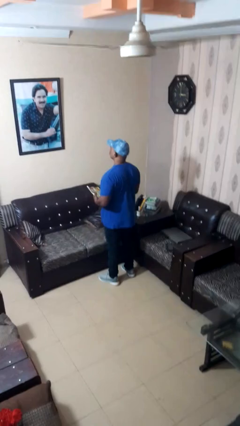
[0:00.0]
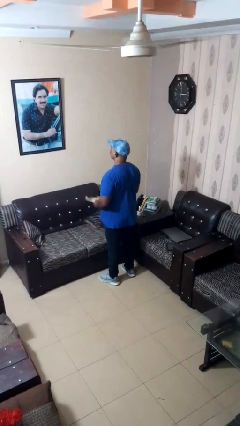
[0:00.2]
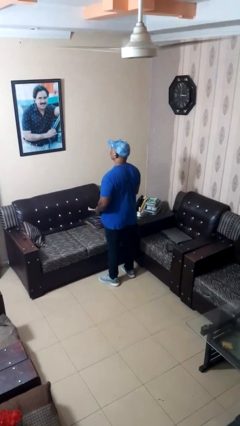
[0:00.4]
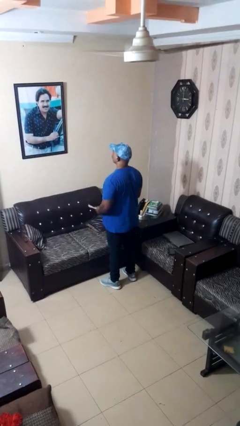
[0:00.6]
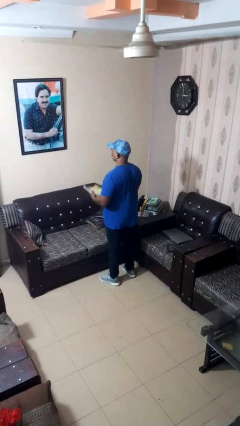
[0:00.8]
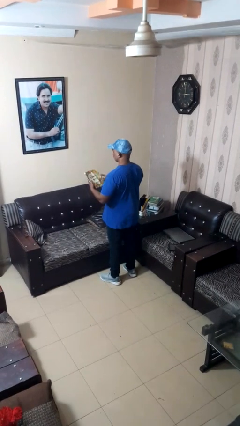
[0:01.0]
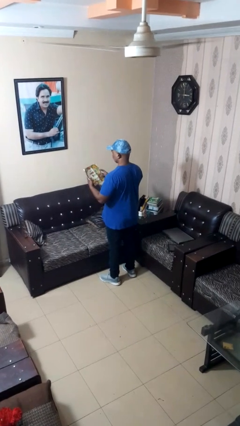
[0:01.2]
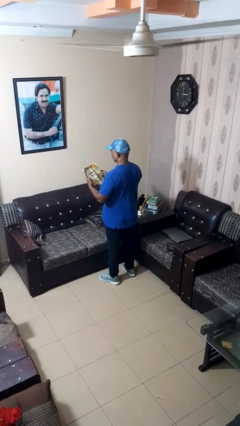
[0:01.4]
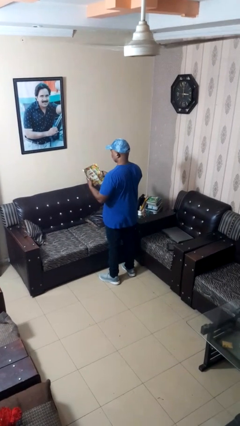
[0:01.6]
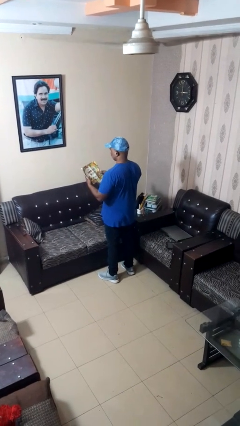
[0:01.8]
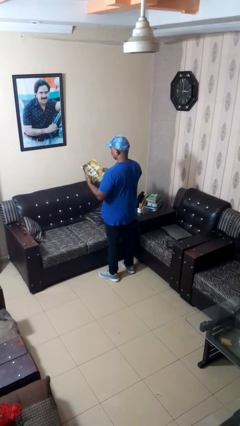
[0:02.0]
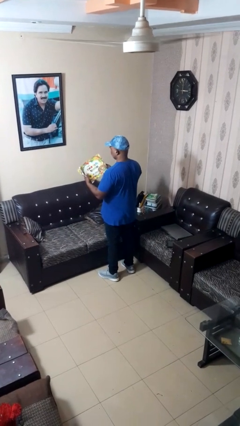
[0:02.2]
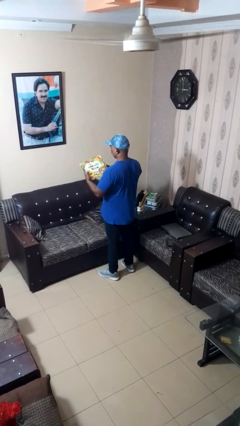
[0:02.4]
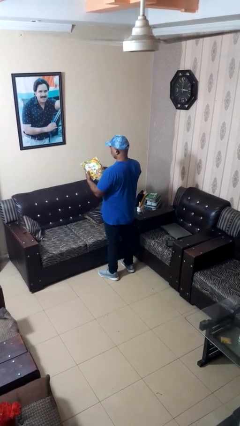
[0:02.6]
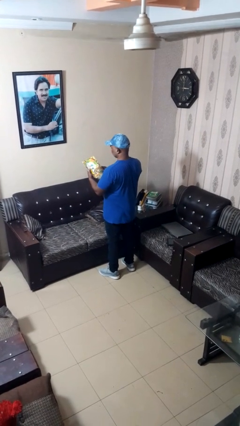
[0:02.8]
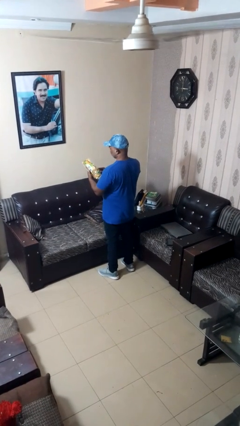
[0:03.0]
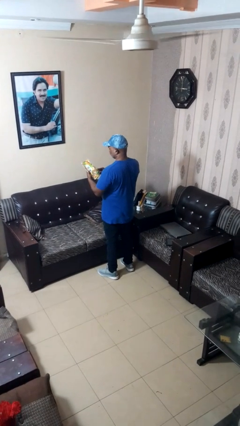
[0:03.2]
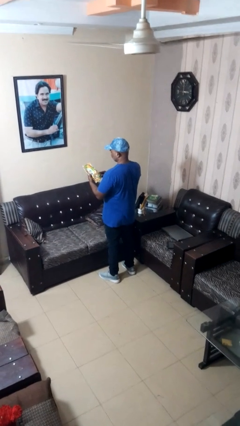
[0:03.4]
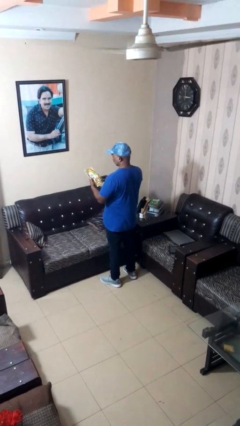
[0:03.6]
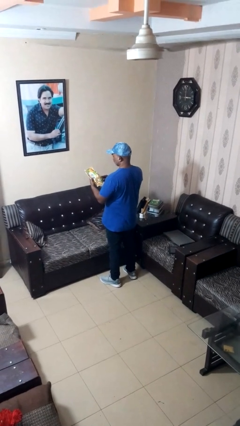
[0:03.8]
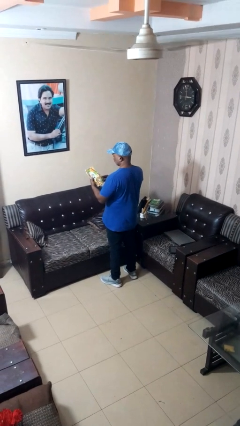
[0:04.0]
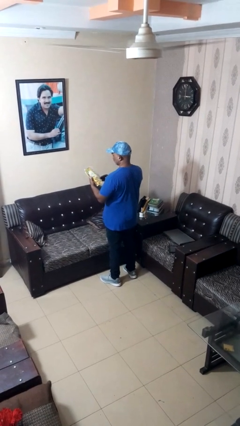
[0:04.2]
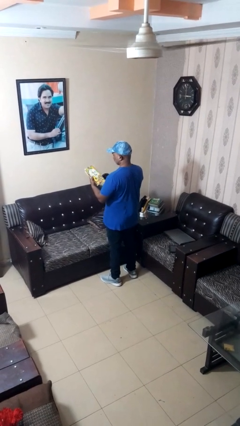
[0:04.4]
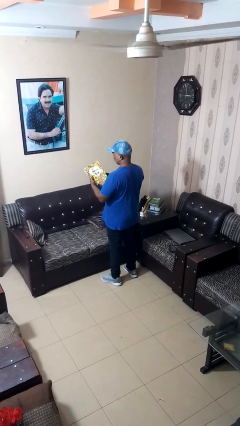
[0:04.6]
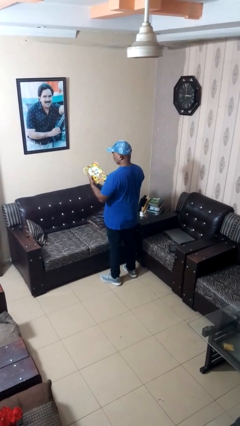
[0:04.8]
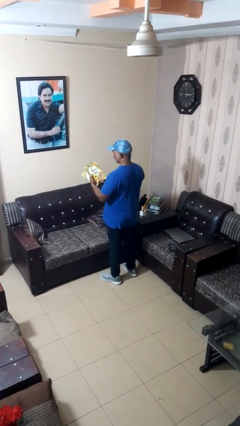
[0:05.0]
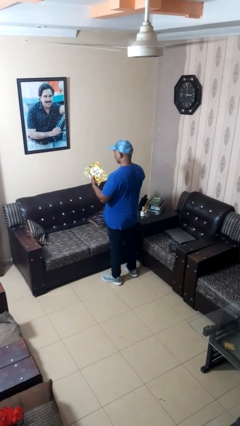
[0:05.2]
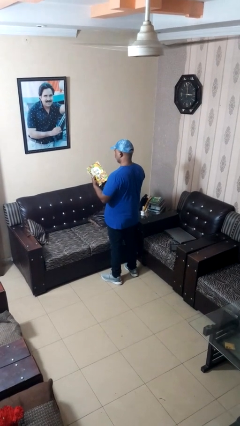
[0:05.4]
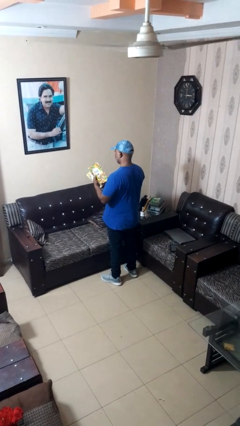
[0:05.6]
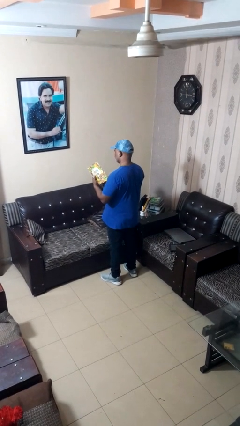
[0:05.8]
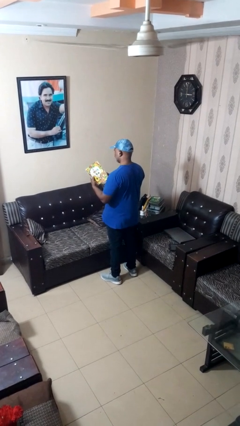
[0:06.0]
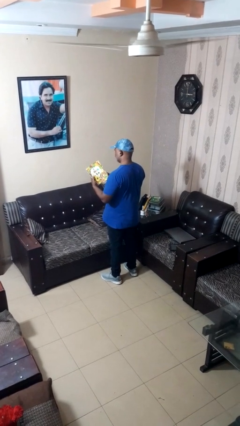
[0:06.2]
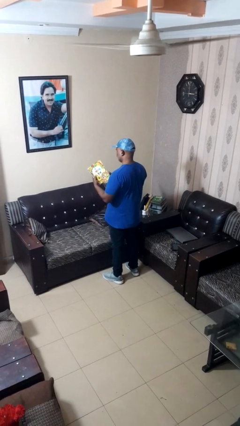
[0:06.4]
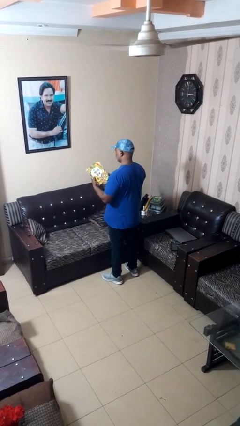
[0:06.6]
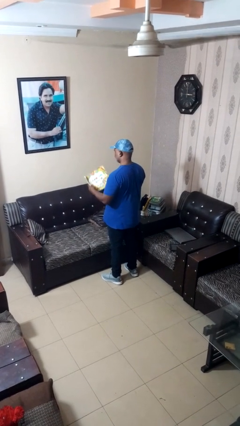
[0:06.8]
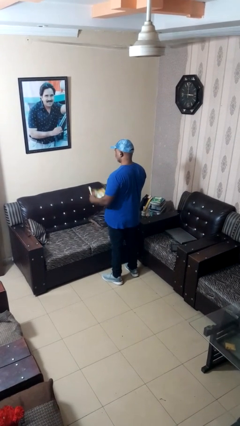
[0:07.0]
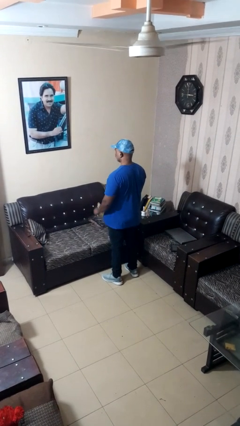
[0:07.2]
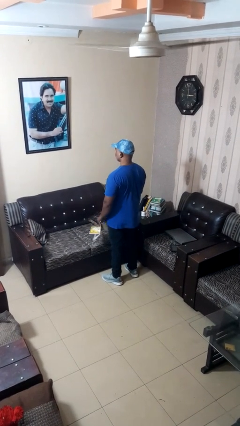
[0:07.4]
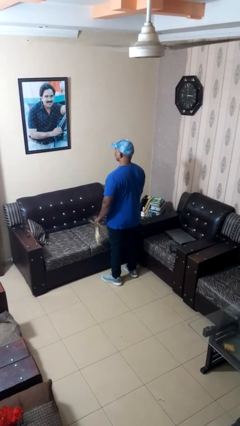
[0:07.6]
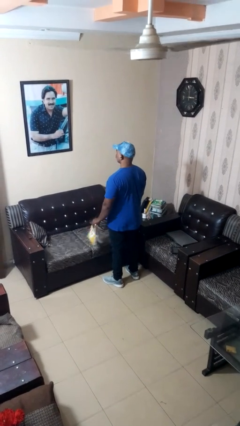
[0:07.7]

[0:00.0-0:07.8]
person reads magazine

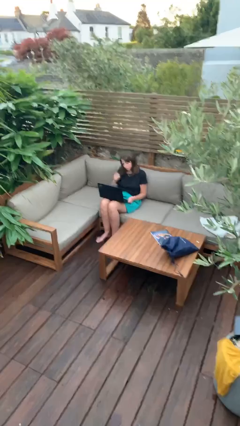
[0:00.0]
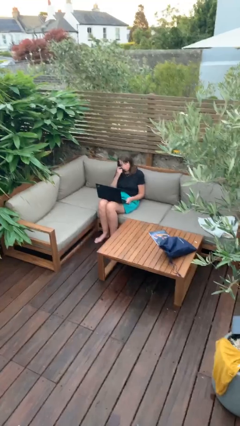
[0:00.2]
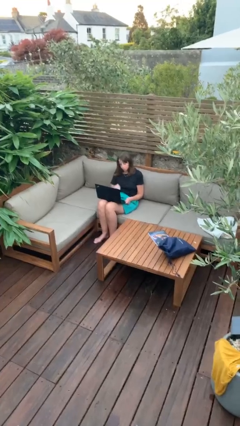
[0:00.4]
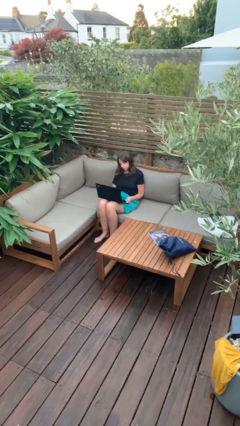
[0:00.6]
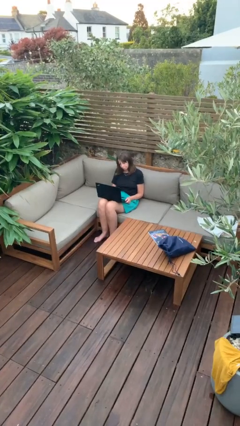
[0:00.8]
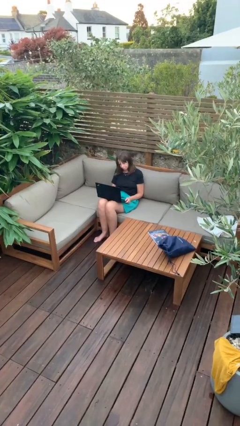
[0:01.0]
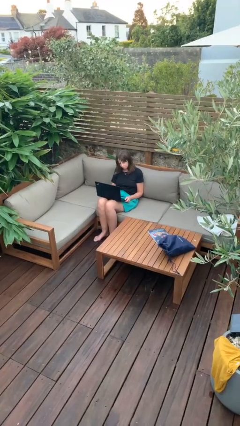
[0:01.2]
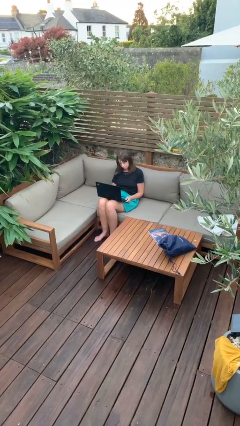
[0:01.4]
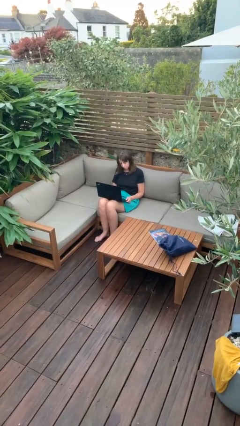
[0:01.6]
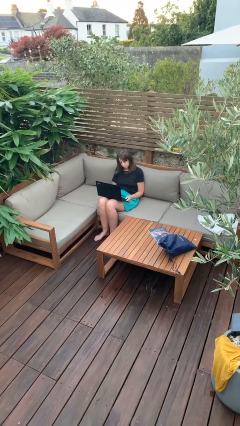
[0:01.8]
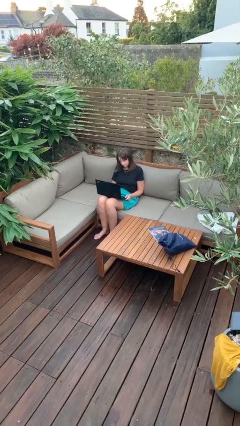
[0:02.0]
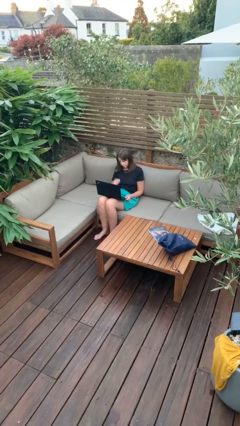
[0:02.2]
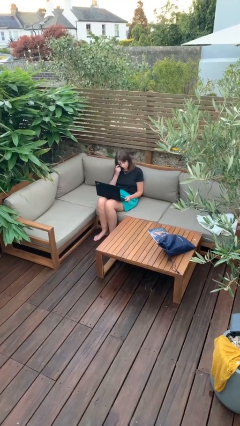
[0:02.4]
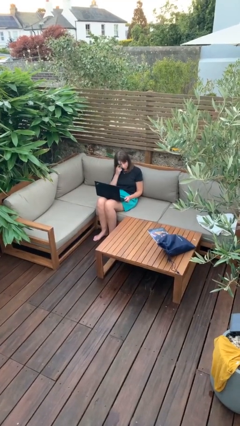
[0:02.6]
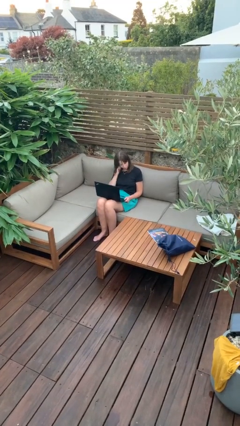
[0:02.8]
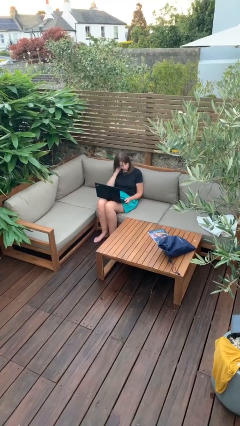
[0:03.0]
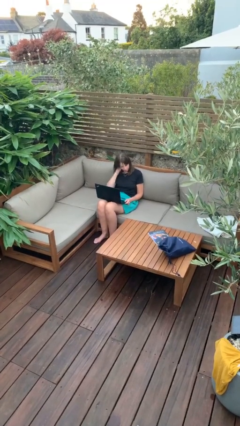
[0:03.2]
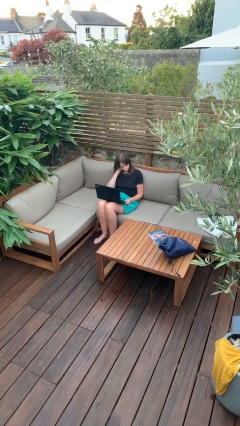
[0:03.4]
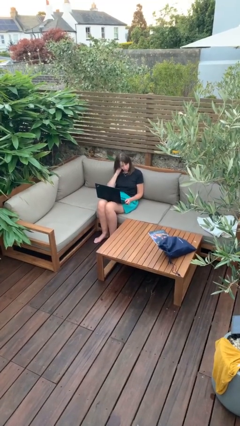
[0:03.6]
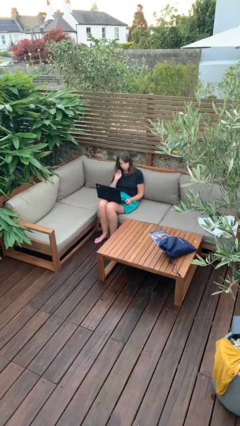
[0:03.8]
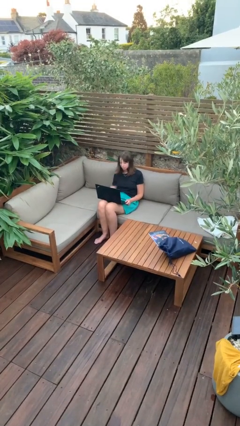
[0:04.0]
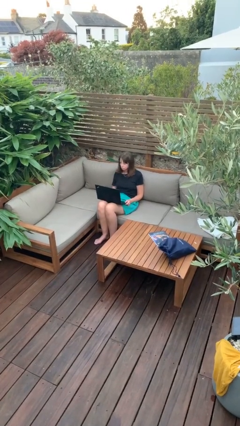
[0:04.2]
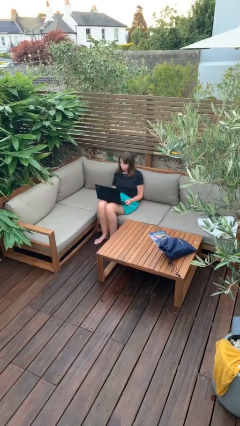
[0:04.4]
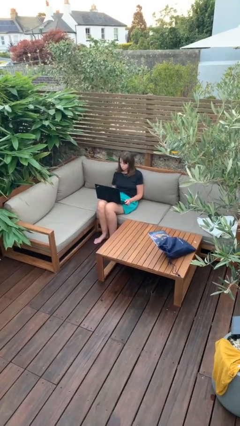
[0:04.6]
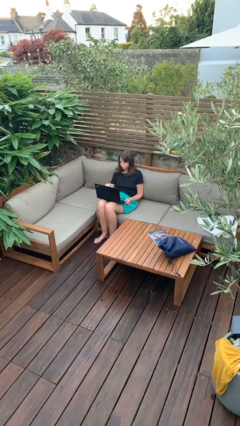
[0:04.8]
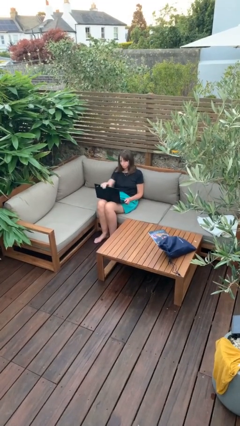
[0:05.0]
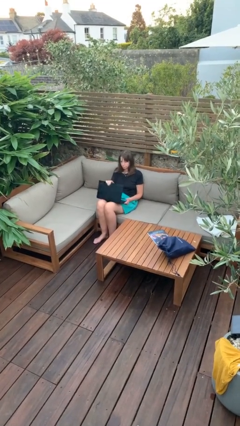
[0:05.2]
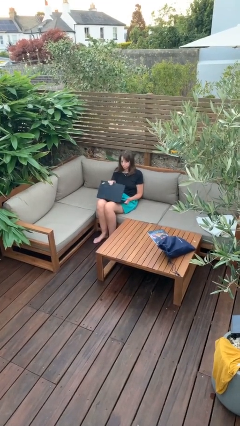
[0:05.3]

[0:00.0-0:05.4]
person interacts with laptop

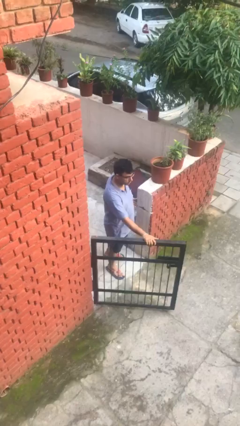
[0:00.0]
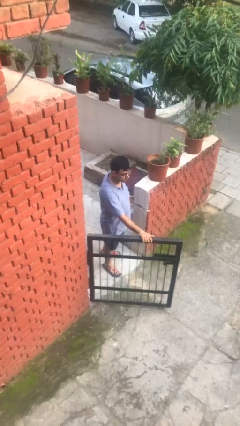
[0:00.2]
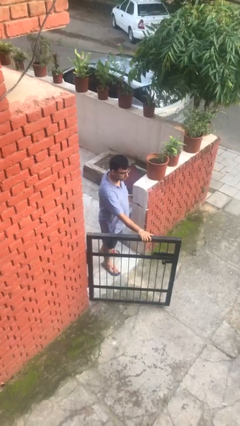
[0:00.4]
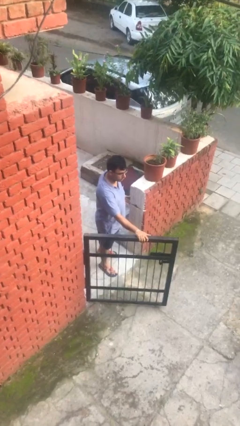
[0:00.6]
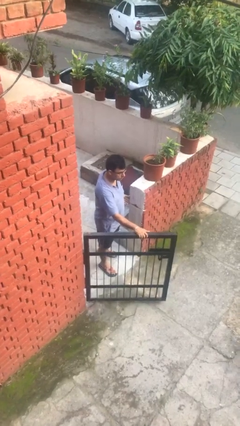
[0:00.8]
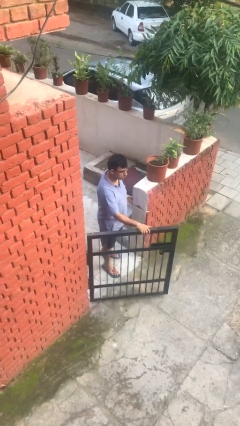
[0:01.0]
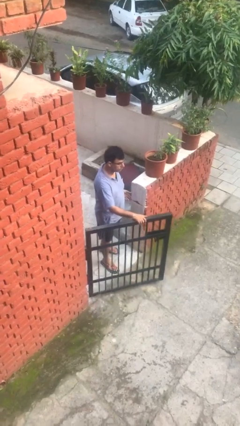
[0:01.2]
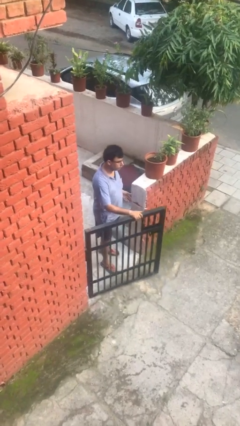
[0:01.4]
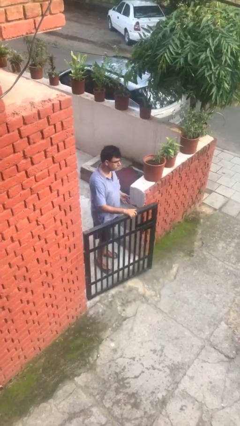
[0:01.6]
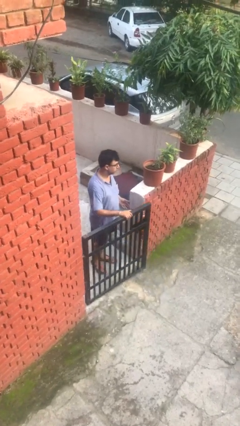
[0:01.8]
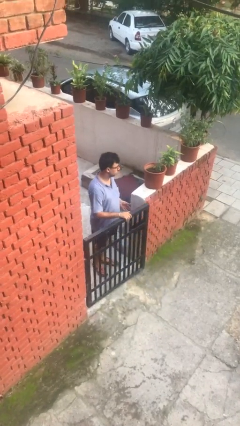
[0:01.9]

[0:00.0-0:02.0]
person closes gate

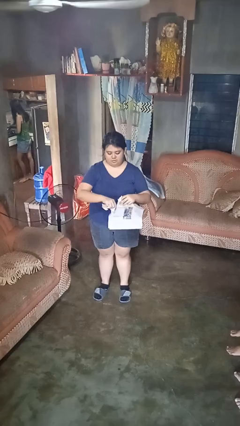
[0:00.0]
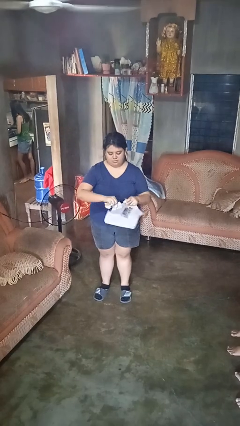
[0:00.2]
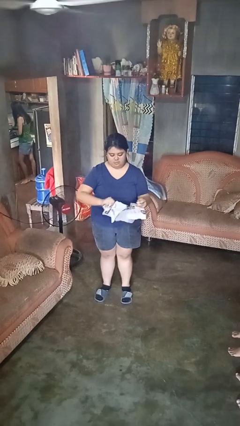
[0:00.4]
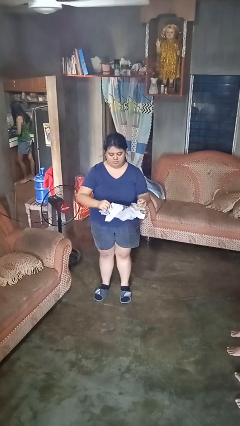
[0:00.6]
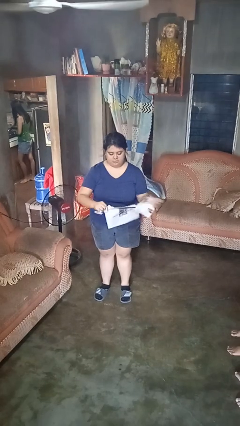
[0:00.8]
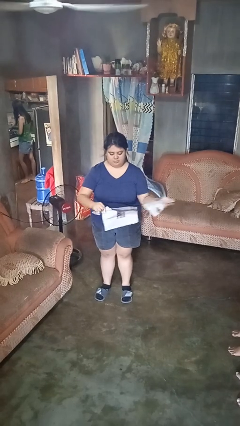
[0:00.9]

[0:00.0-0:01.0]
person tears paper

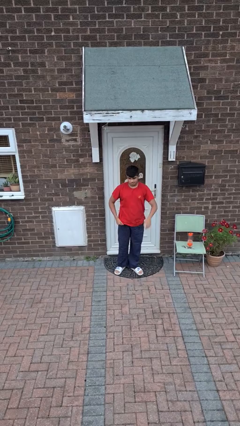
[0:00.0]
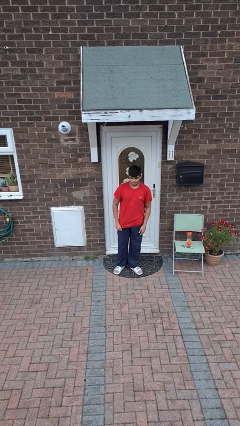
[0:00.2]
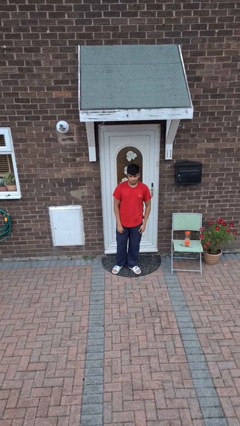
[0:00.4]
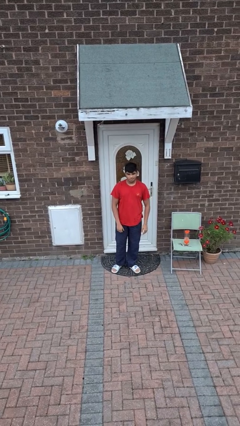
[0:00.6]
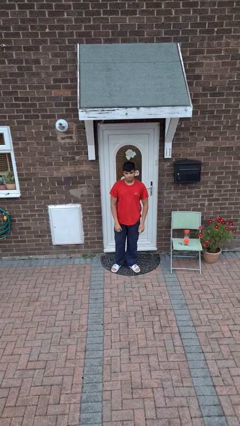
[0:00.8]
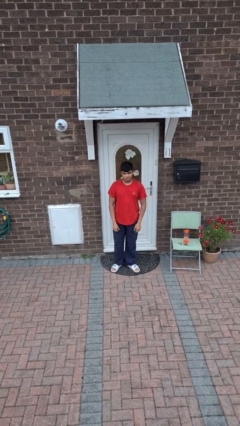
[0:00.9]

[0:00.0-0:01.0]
person gestures lower hand
